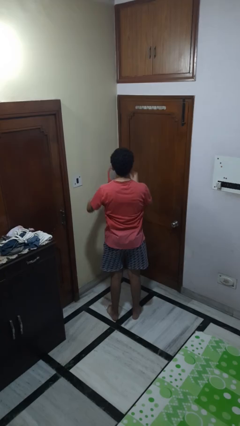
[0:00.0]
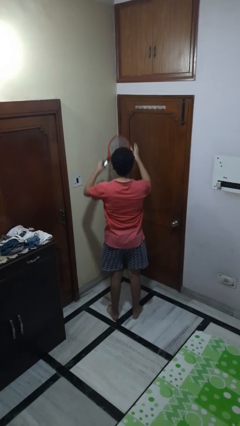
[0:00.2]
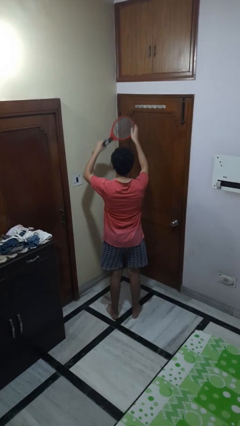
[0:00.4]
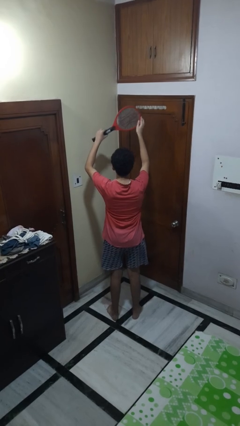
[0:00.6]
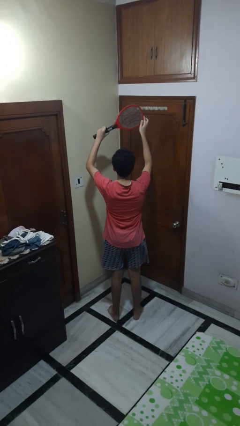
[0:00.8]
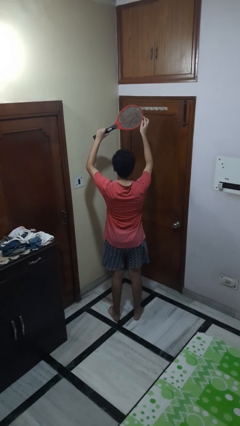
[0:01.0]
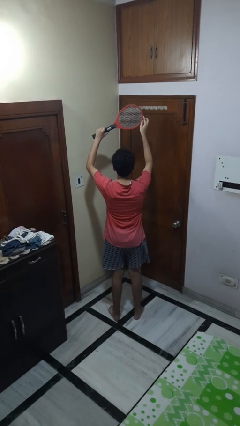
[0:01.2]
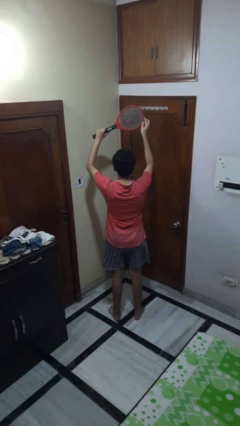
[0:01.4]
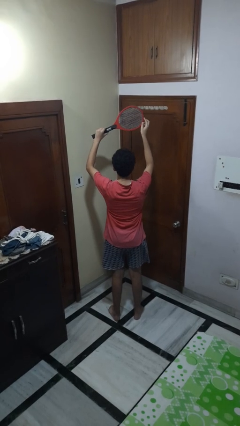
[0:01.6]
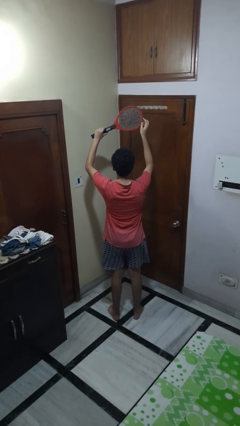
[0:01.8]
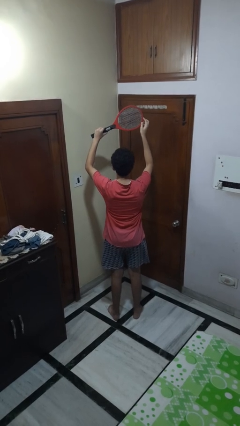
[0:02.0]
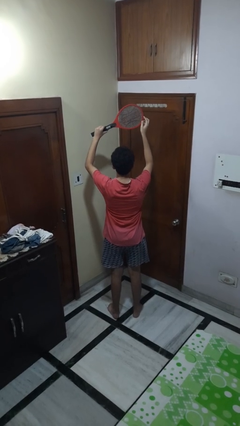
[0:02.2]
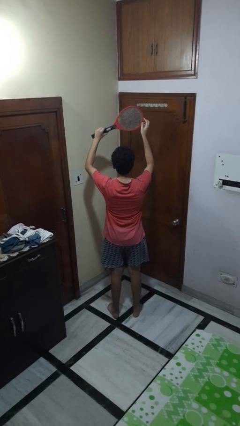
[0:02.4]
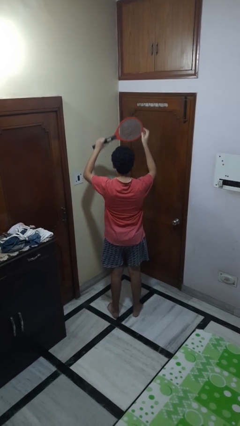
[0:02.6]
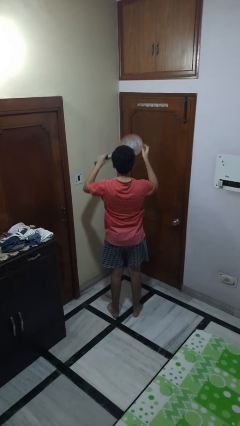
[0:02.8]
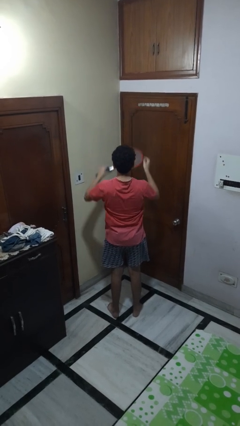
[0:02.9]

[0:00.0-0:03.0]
person holds object above head

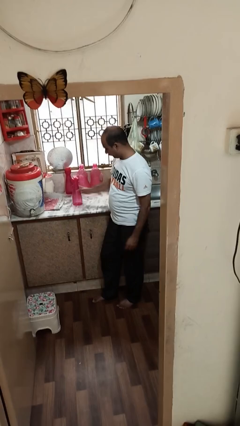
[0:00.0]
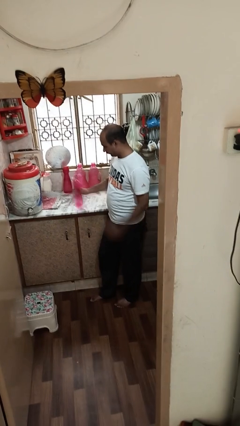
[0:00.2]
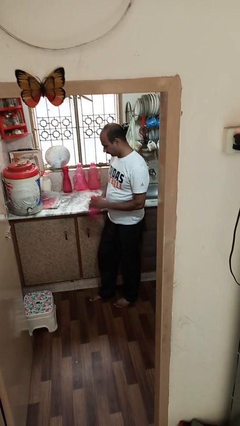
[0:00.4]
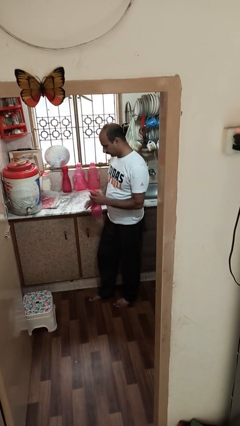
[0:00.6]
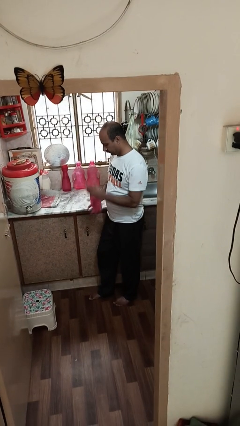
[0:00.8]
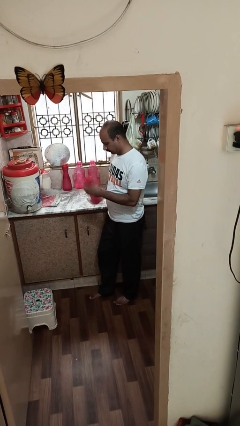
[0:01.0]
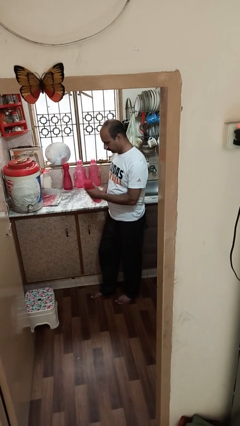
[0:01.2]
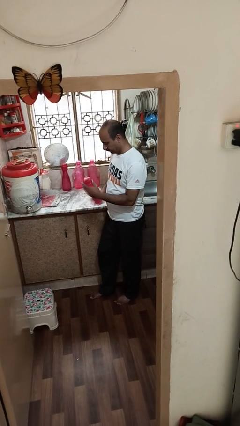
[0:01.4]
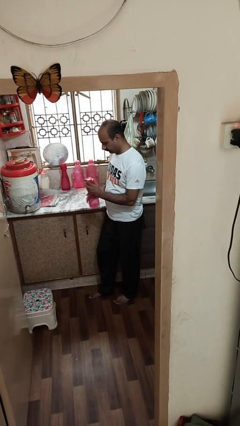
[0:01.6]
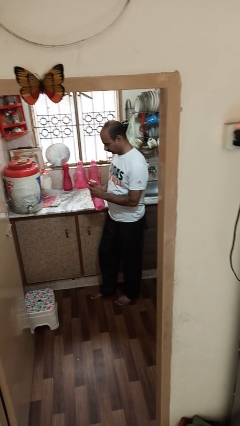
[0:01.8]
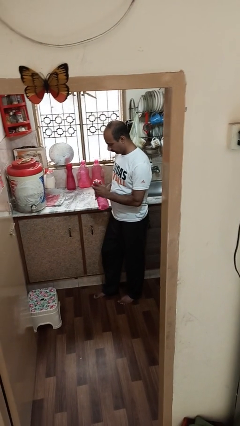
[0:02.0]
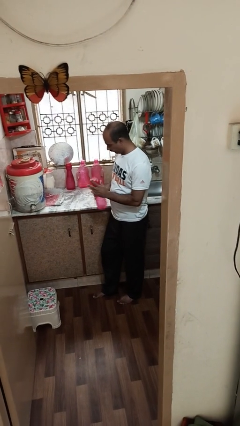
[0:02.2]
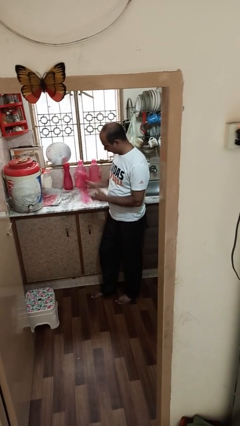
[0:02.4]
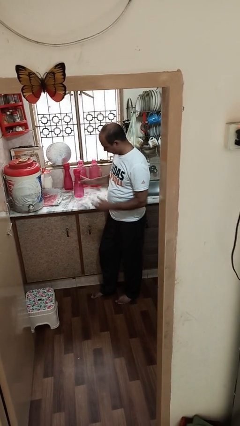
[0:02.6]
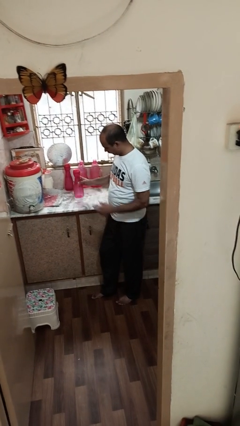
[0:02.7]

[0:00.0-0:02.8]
person picks up object from countertop

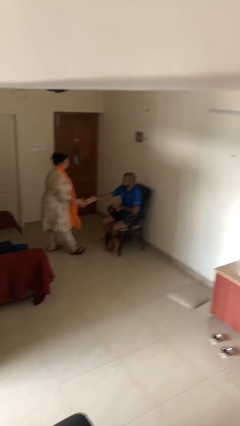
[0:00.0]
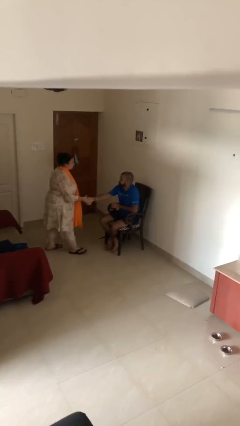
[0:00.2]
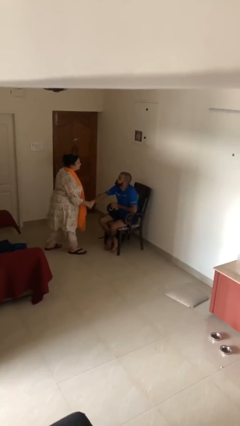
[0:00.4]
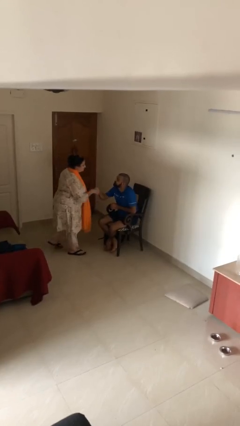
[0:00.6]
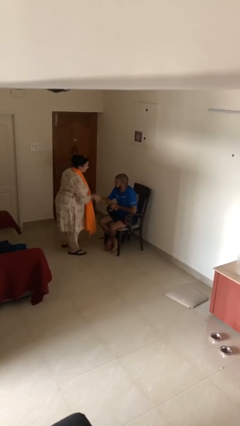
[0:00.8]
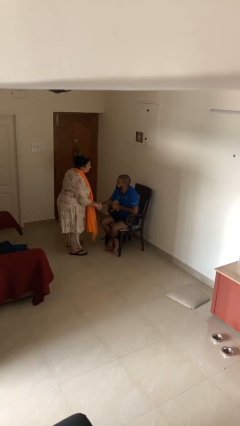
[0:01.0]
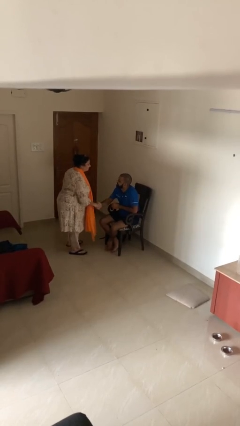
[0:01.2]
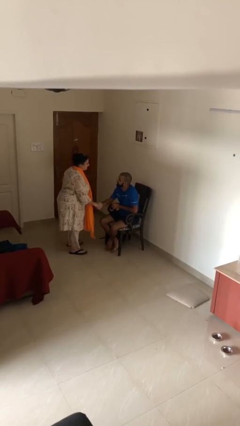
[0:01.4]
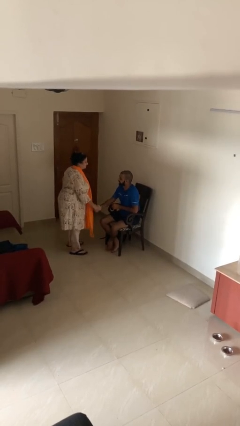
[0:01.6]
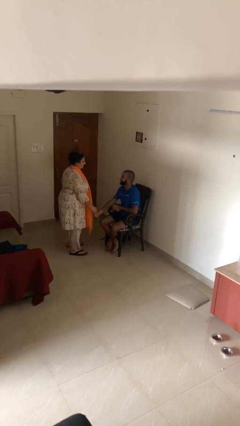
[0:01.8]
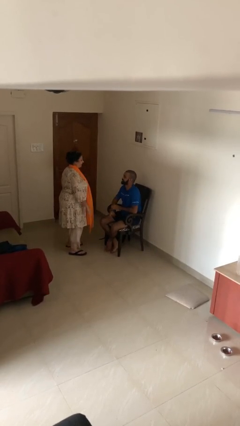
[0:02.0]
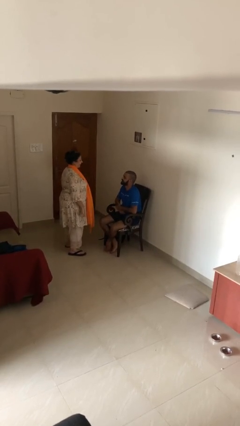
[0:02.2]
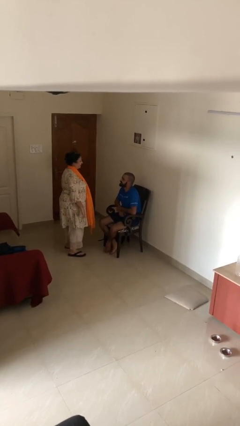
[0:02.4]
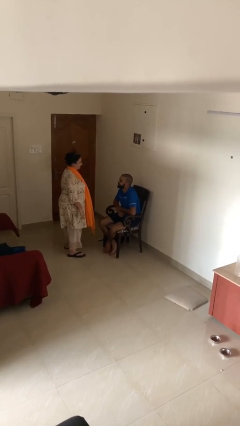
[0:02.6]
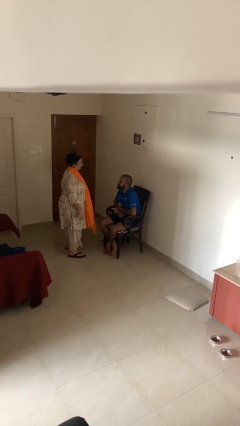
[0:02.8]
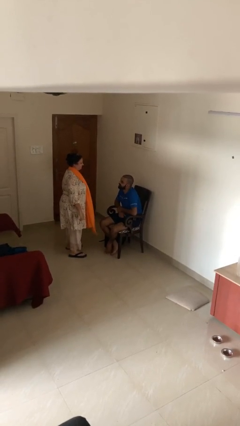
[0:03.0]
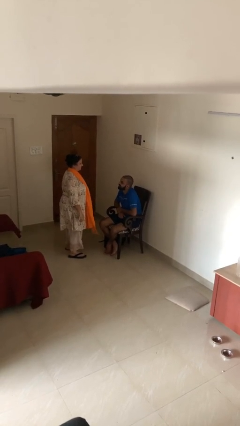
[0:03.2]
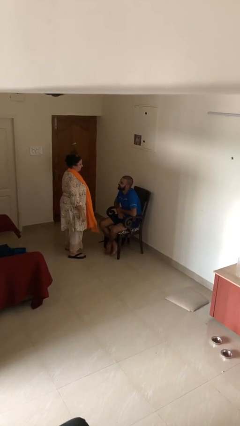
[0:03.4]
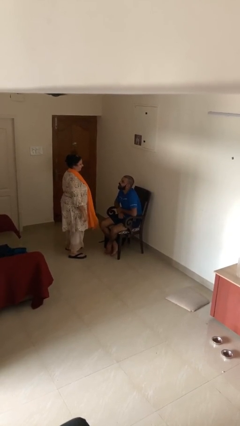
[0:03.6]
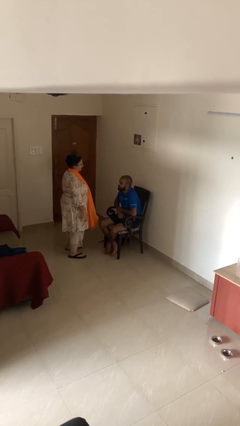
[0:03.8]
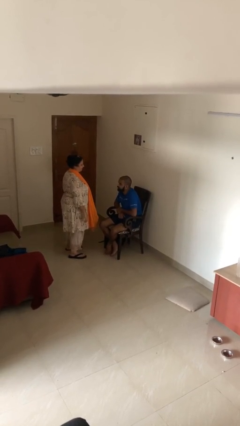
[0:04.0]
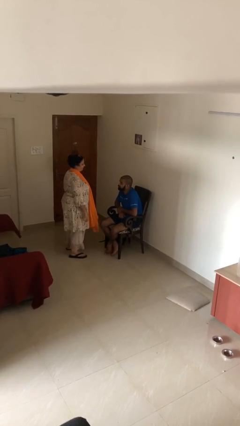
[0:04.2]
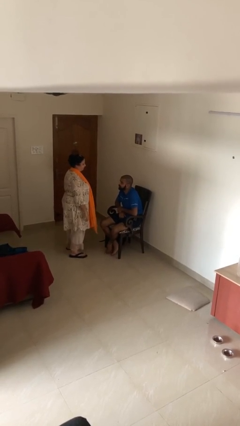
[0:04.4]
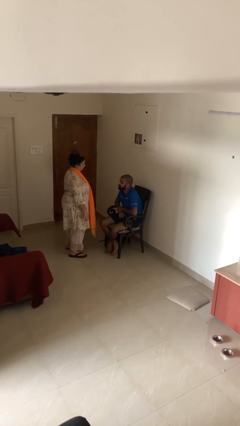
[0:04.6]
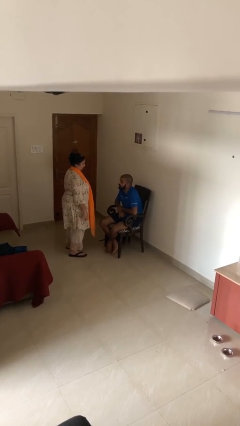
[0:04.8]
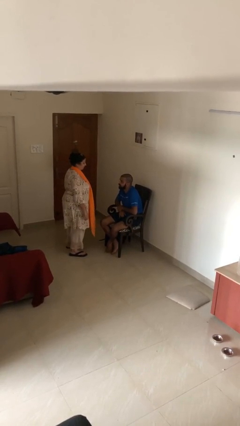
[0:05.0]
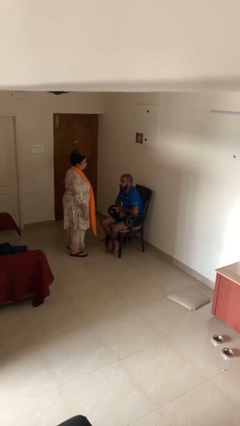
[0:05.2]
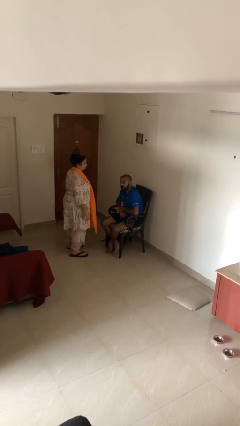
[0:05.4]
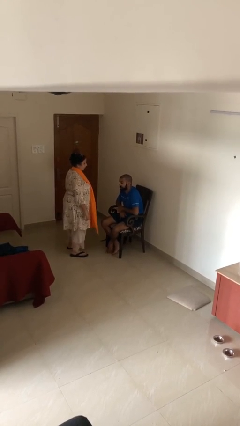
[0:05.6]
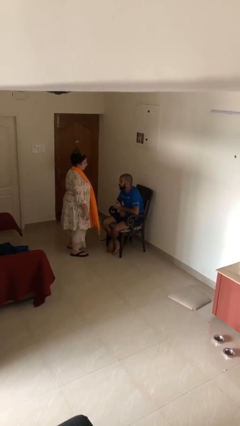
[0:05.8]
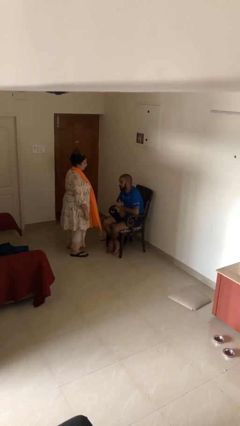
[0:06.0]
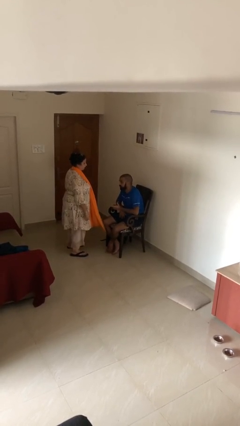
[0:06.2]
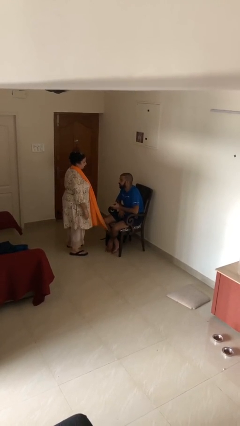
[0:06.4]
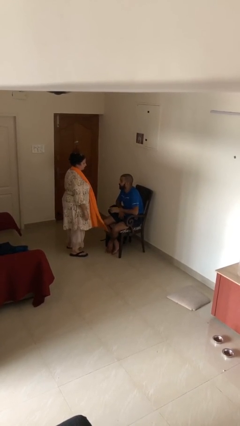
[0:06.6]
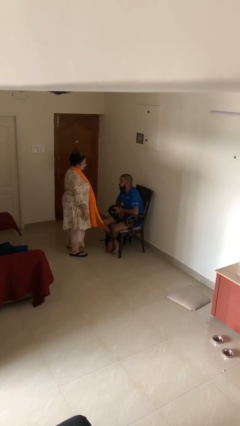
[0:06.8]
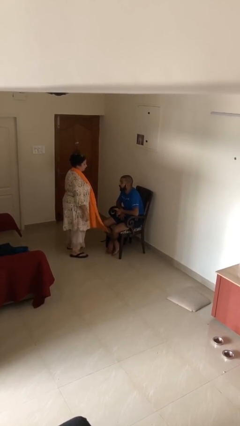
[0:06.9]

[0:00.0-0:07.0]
person shakes hand

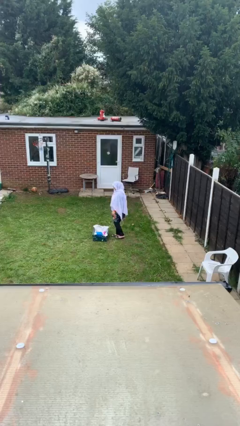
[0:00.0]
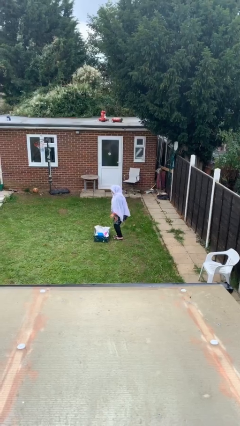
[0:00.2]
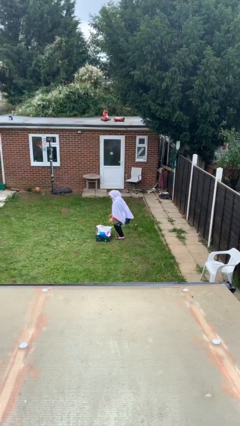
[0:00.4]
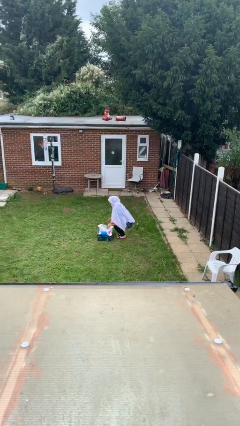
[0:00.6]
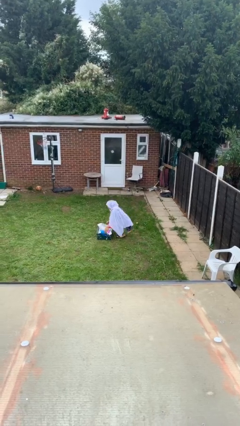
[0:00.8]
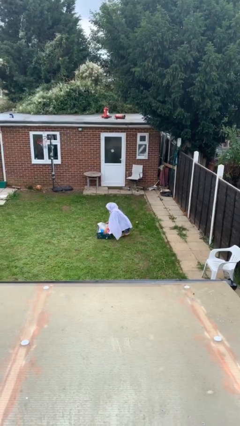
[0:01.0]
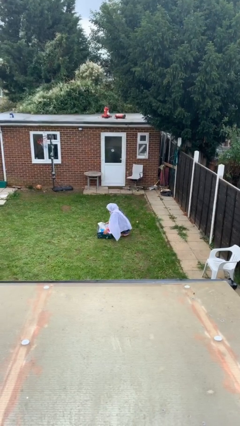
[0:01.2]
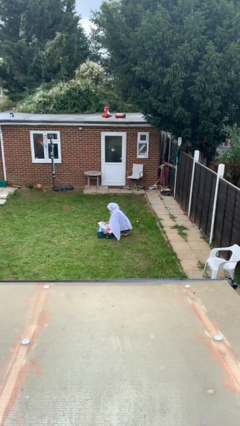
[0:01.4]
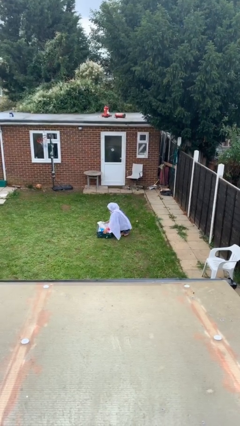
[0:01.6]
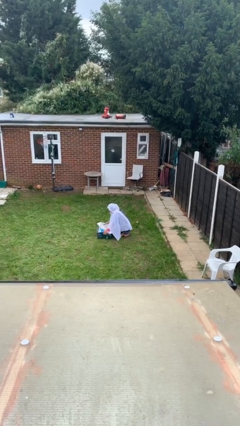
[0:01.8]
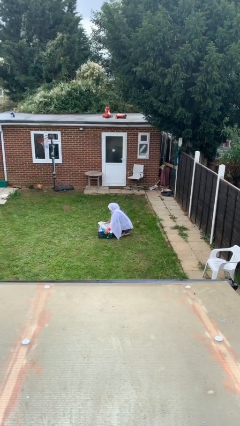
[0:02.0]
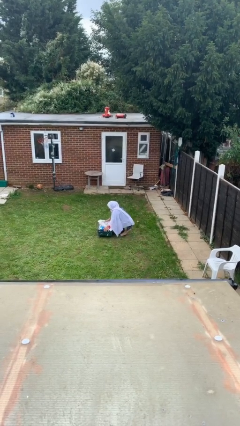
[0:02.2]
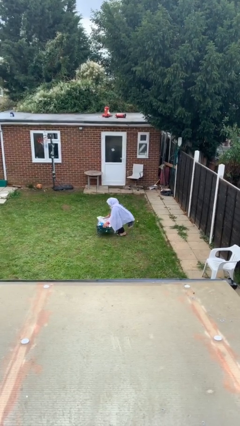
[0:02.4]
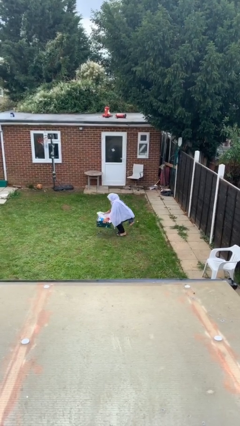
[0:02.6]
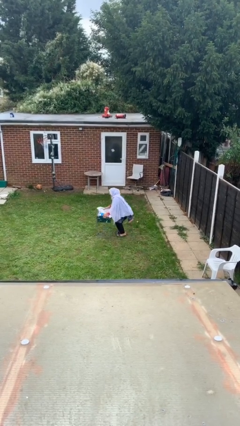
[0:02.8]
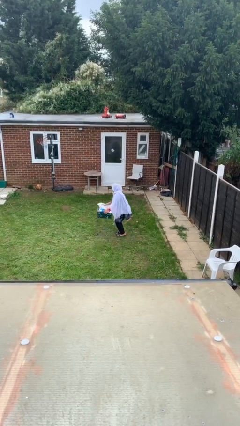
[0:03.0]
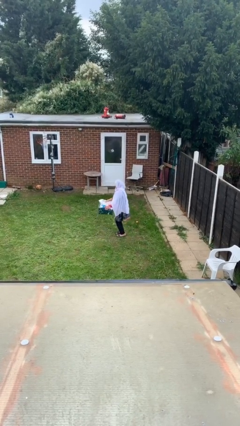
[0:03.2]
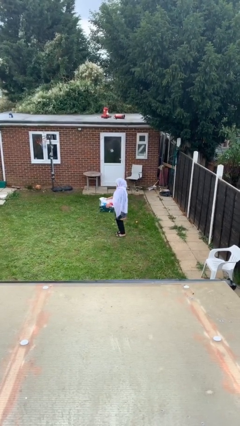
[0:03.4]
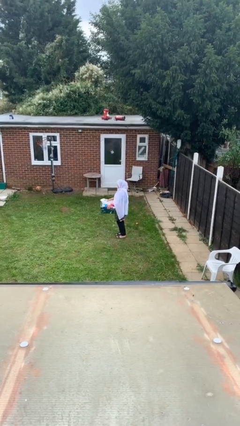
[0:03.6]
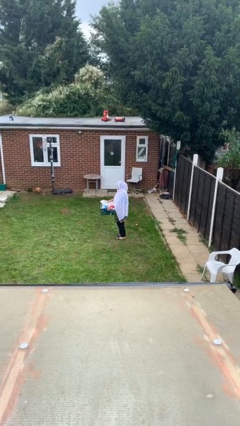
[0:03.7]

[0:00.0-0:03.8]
person picks up object from floor

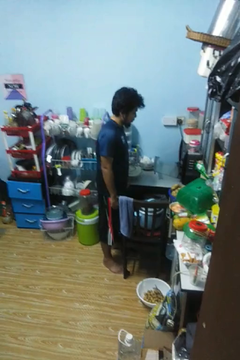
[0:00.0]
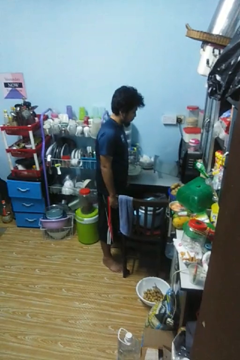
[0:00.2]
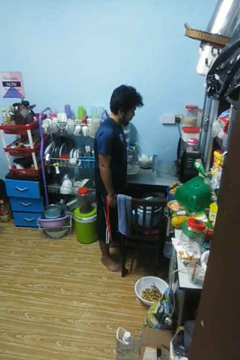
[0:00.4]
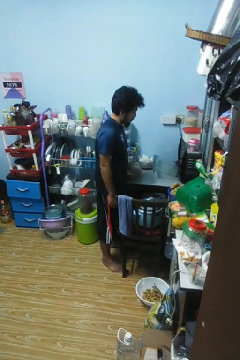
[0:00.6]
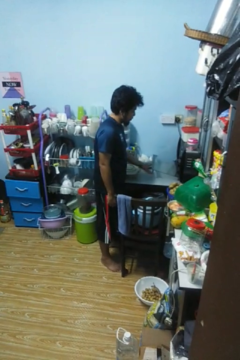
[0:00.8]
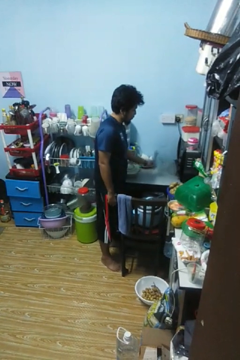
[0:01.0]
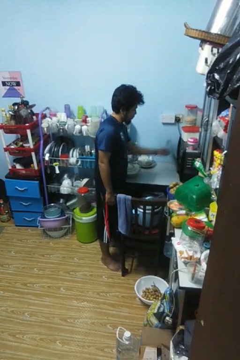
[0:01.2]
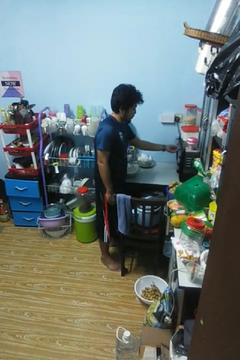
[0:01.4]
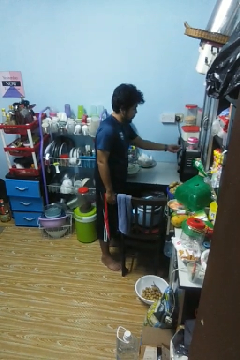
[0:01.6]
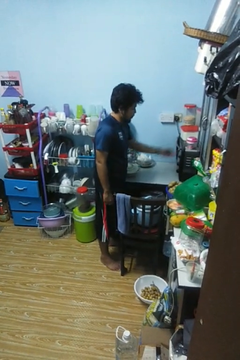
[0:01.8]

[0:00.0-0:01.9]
person closes oven door
